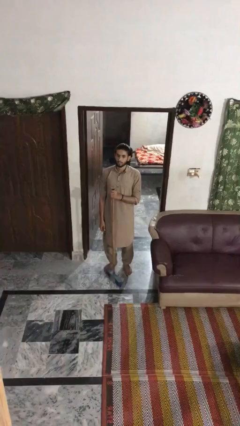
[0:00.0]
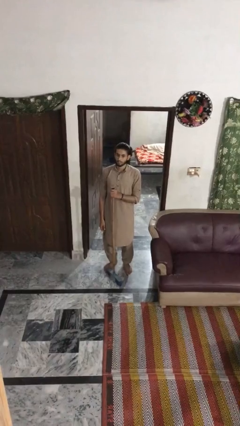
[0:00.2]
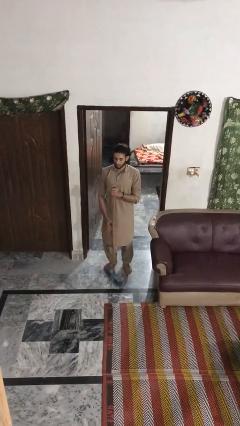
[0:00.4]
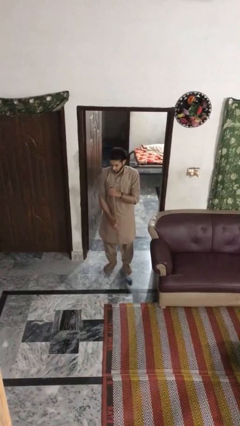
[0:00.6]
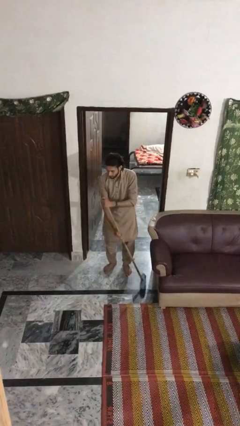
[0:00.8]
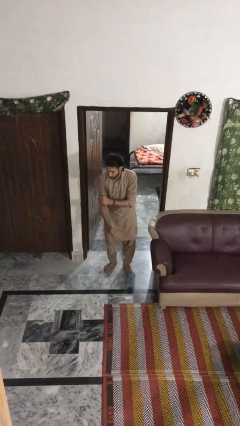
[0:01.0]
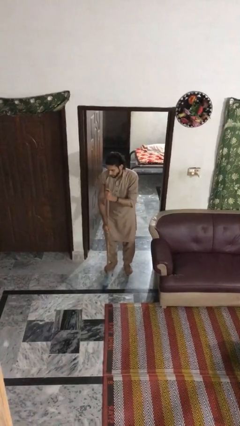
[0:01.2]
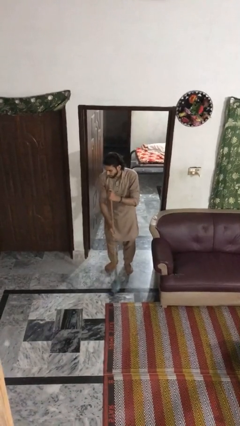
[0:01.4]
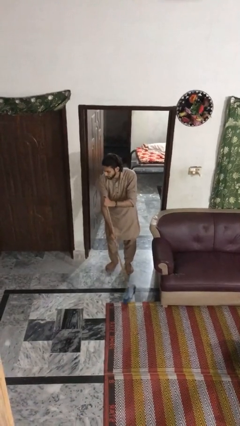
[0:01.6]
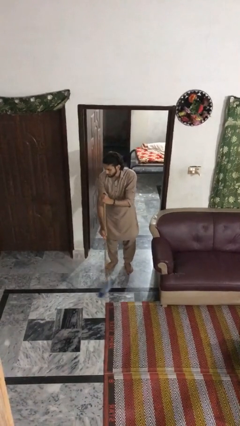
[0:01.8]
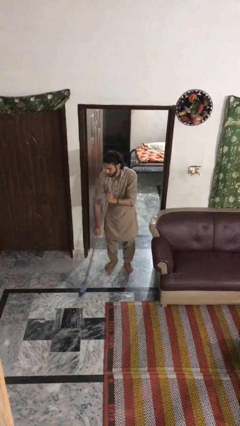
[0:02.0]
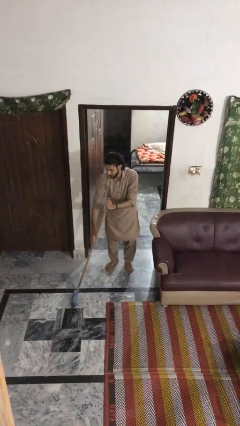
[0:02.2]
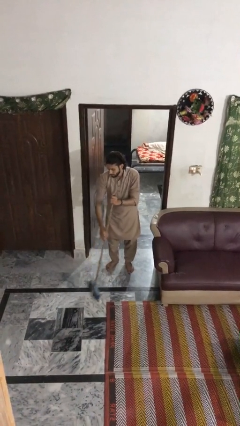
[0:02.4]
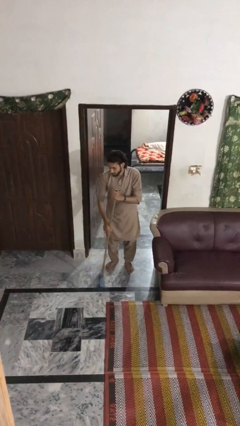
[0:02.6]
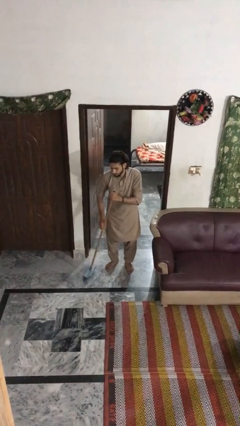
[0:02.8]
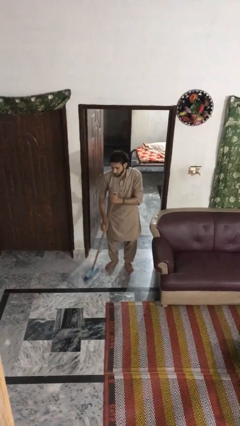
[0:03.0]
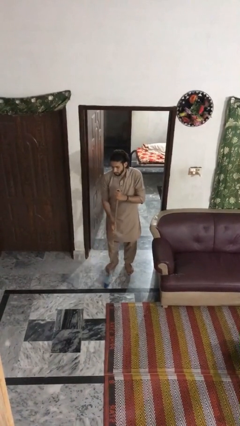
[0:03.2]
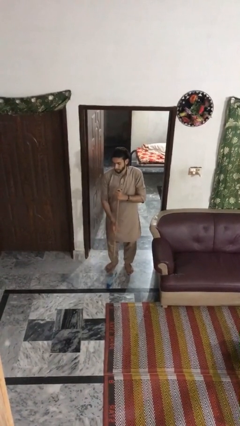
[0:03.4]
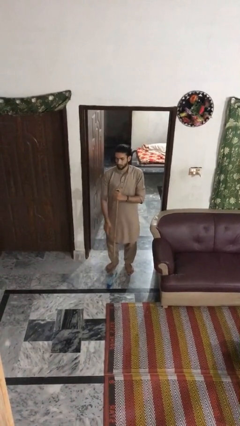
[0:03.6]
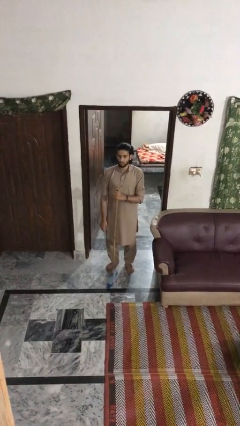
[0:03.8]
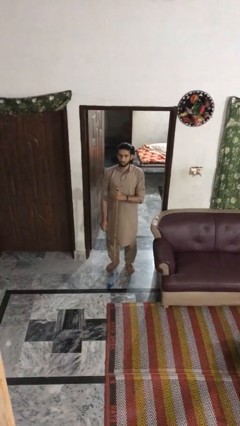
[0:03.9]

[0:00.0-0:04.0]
person sweeps floor

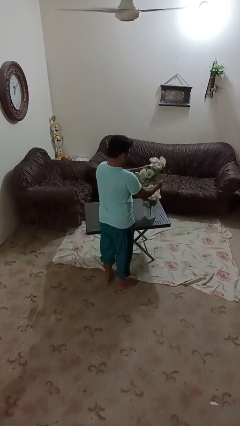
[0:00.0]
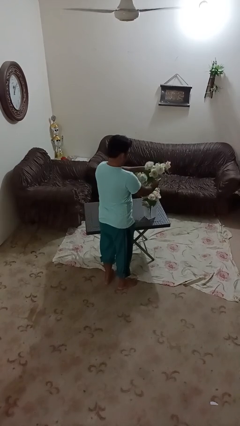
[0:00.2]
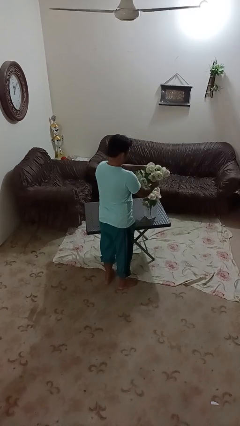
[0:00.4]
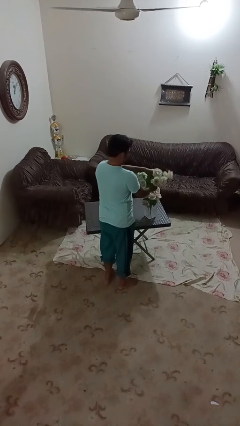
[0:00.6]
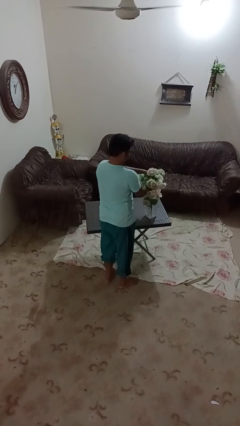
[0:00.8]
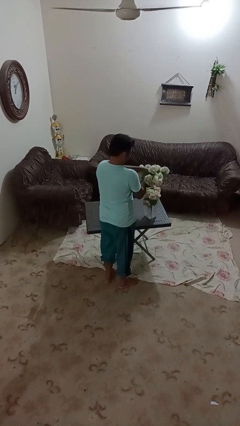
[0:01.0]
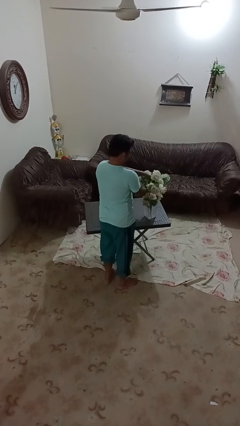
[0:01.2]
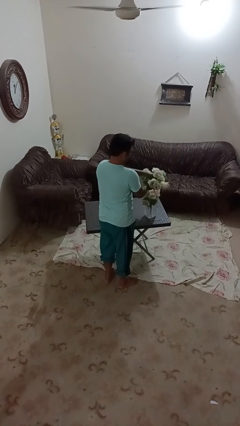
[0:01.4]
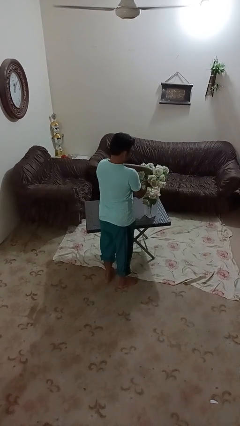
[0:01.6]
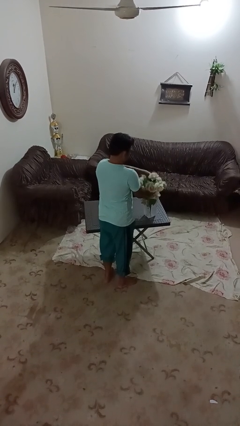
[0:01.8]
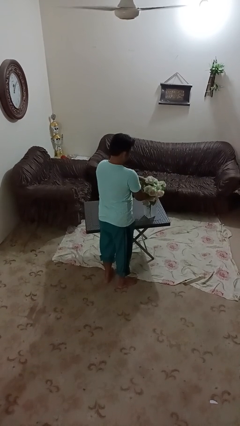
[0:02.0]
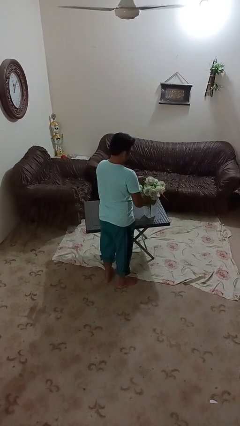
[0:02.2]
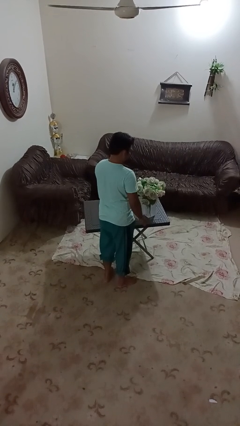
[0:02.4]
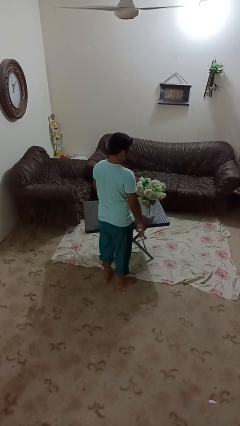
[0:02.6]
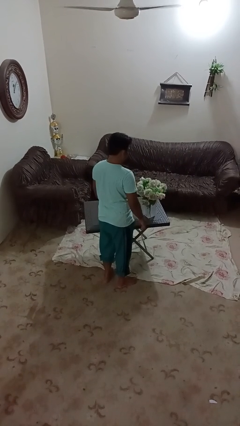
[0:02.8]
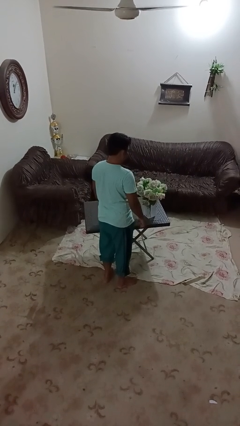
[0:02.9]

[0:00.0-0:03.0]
person arranges flowers in vase

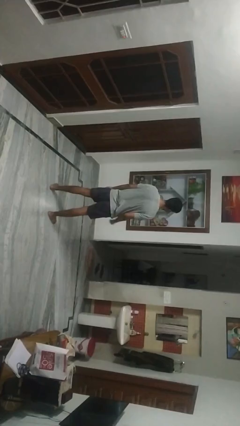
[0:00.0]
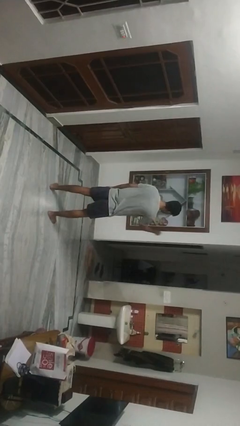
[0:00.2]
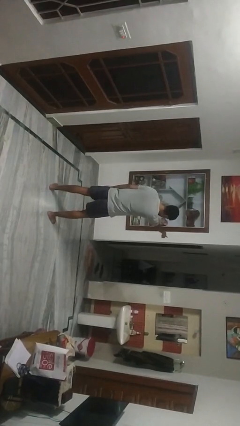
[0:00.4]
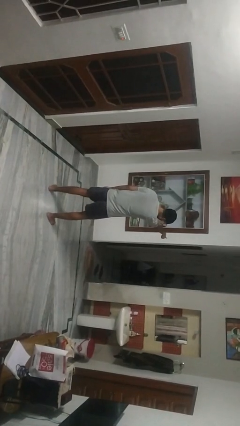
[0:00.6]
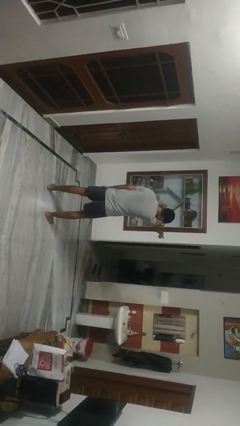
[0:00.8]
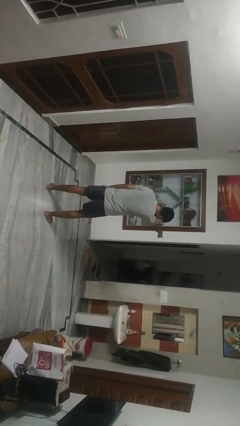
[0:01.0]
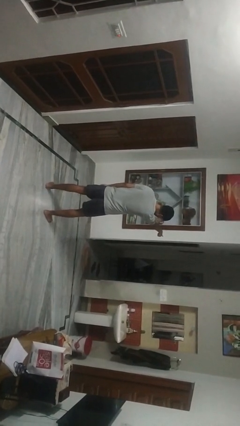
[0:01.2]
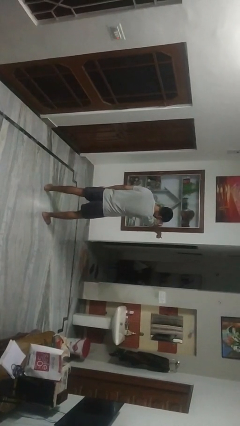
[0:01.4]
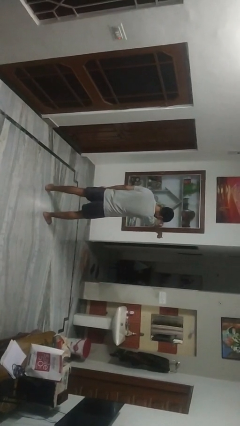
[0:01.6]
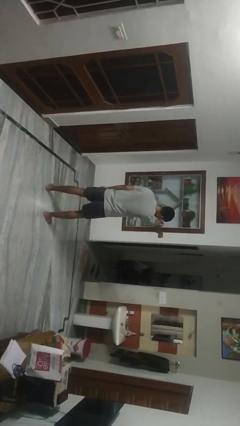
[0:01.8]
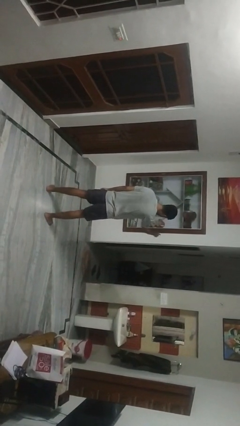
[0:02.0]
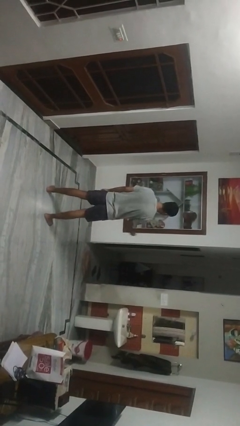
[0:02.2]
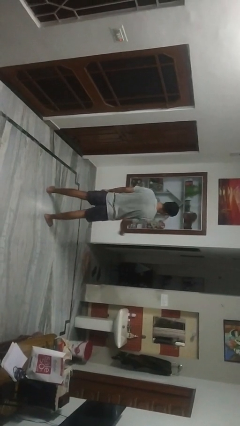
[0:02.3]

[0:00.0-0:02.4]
person points at person

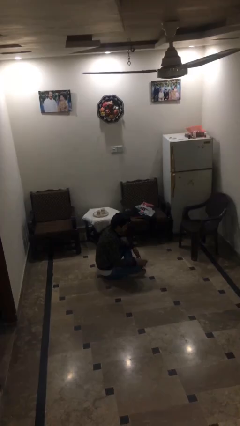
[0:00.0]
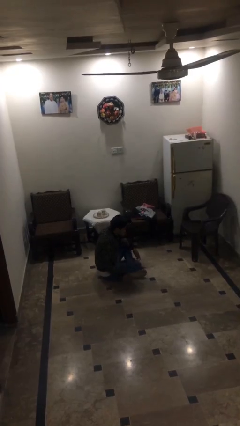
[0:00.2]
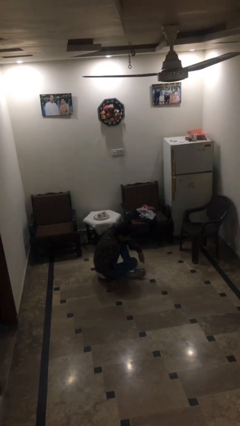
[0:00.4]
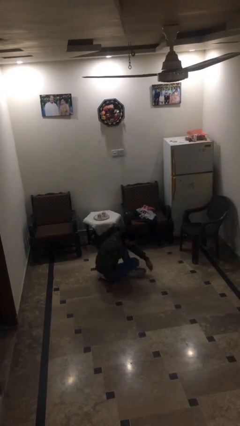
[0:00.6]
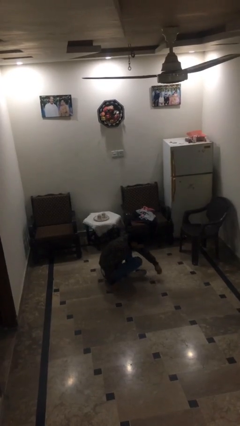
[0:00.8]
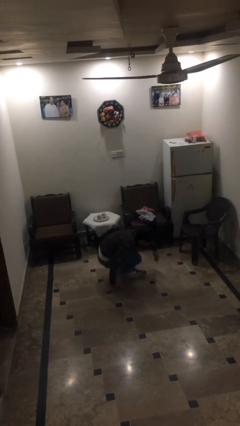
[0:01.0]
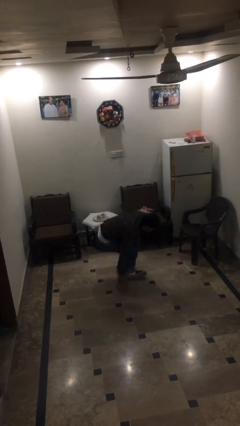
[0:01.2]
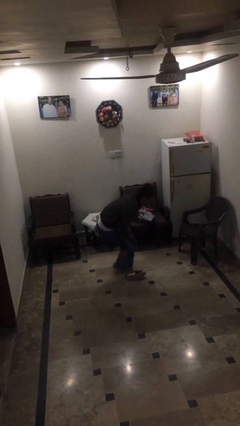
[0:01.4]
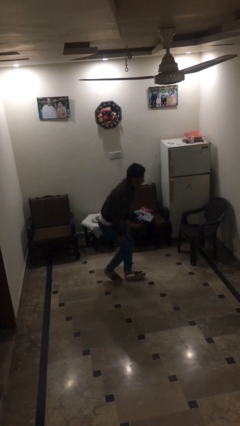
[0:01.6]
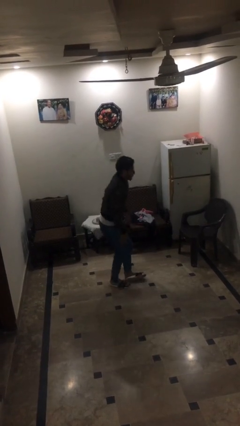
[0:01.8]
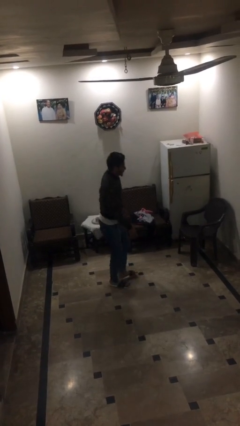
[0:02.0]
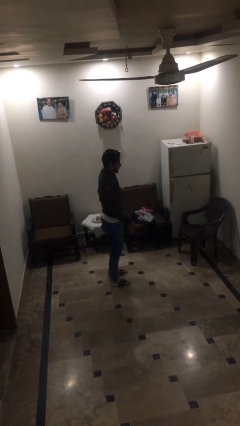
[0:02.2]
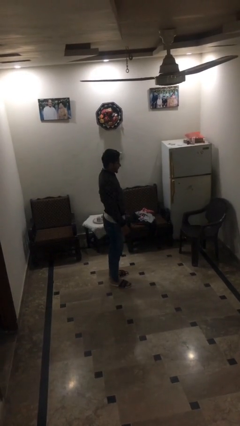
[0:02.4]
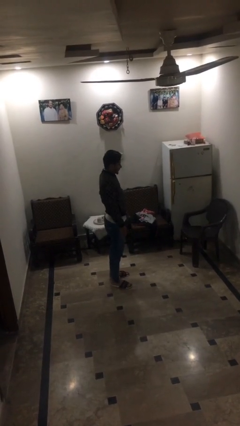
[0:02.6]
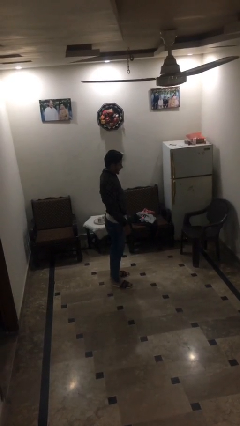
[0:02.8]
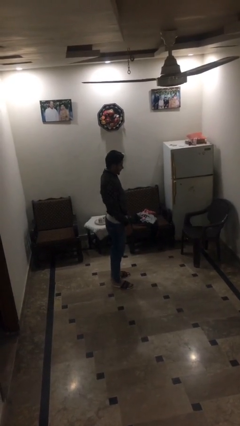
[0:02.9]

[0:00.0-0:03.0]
person stands up

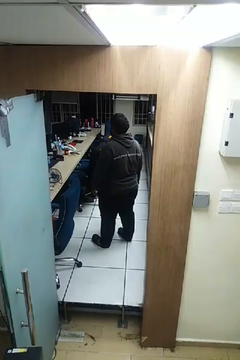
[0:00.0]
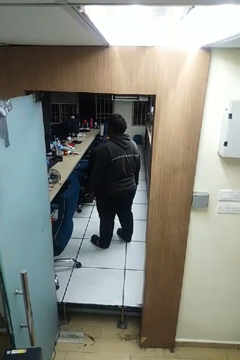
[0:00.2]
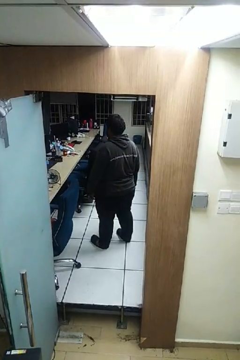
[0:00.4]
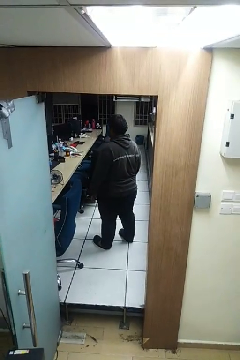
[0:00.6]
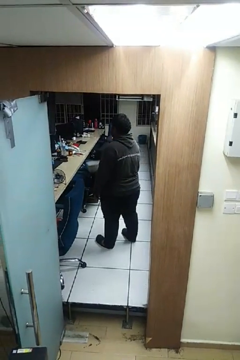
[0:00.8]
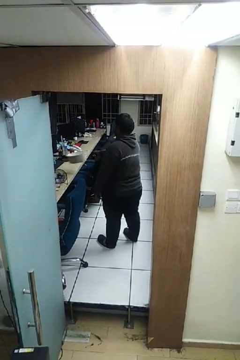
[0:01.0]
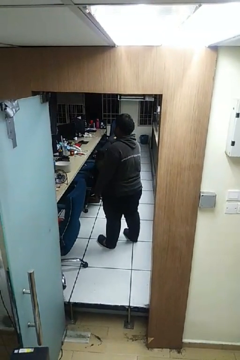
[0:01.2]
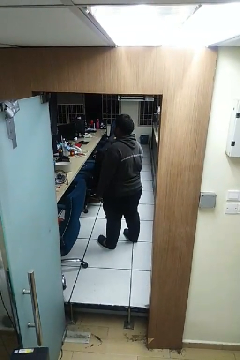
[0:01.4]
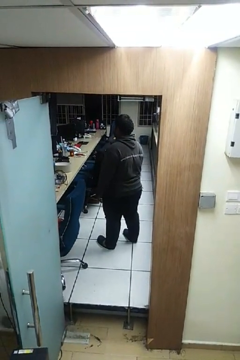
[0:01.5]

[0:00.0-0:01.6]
person throws object on table

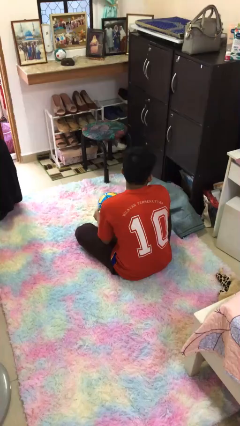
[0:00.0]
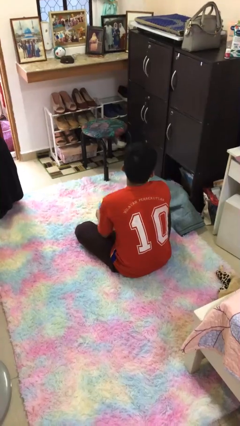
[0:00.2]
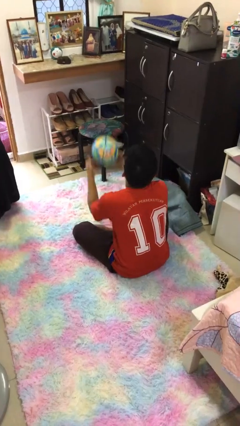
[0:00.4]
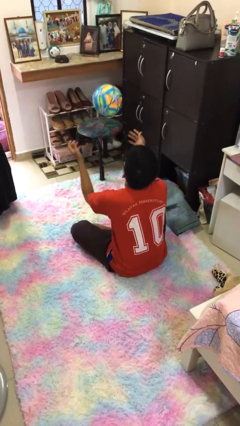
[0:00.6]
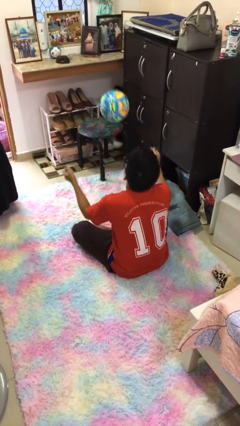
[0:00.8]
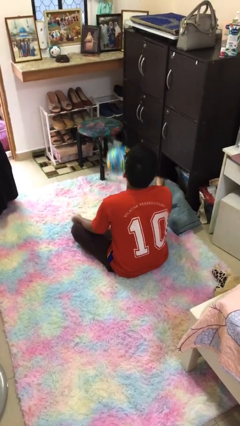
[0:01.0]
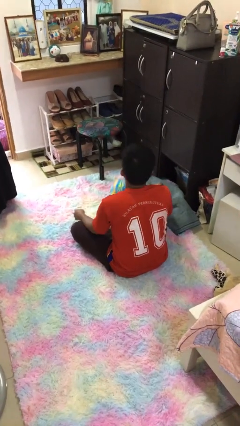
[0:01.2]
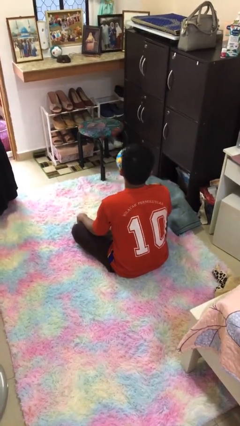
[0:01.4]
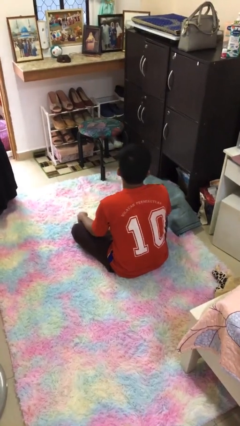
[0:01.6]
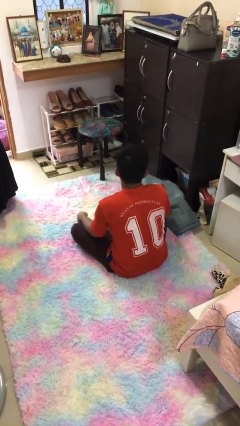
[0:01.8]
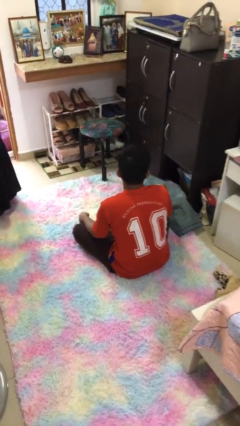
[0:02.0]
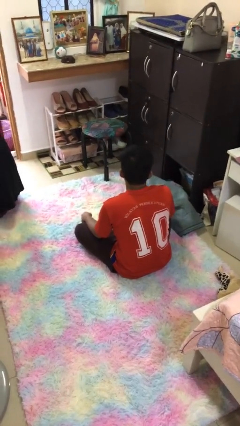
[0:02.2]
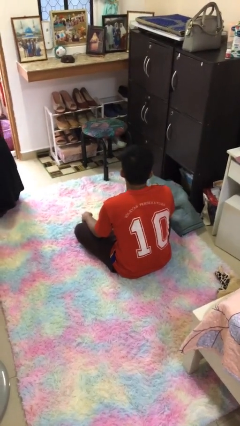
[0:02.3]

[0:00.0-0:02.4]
person bounces ball on floor

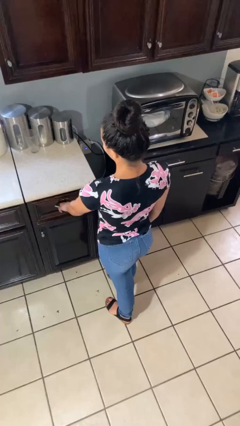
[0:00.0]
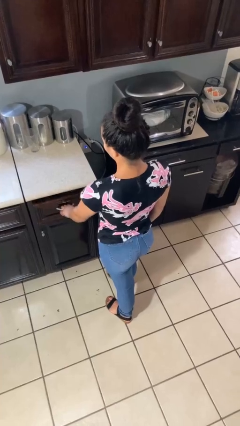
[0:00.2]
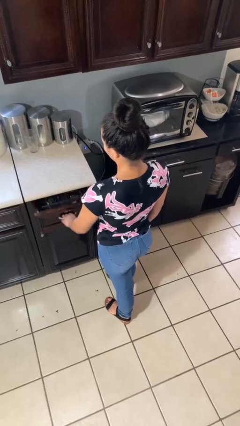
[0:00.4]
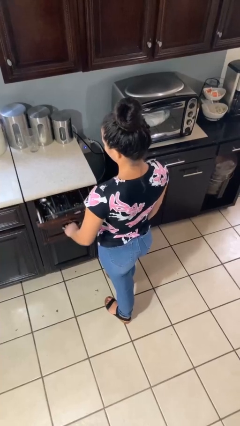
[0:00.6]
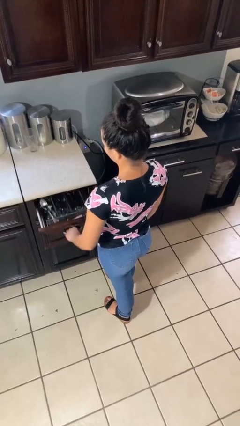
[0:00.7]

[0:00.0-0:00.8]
person opens kitchen drawer

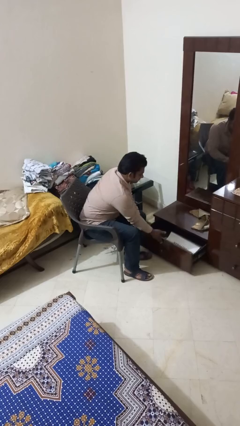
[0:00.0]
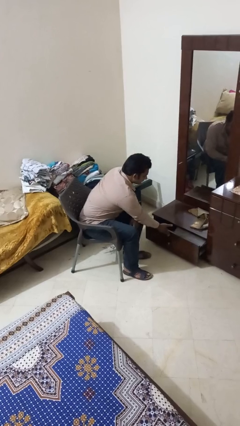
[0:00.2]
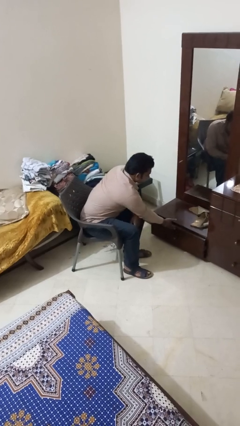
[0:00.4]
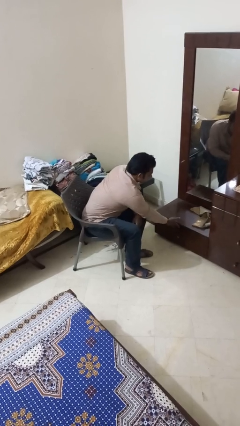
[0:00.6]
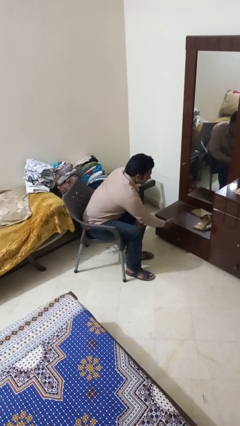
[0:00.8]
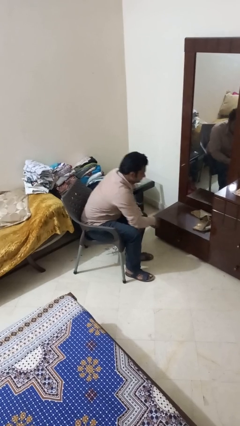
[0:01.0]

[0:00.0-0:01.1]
person closes closet door
